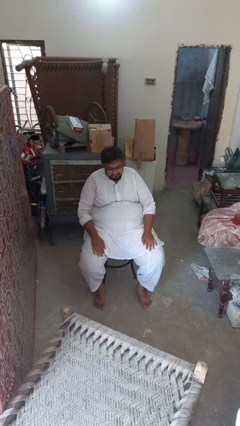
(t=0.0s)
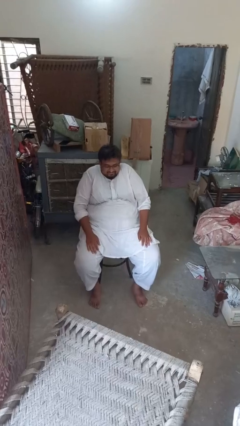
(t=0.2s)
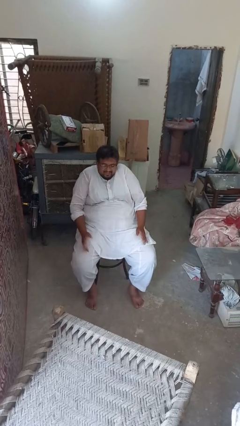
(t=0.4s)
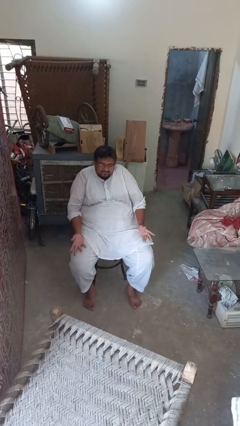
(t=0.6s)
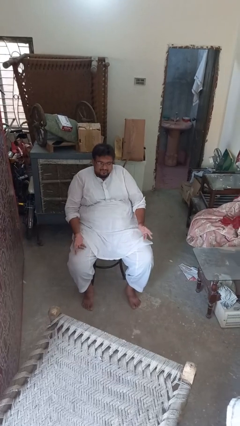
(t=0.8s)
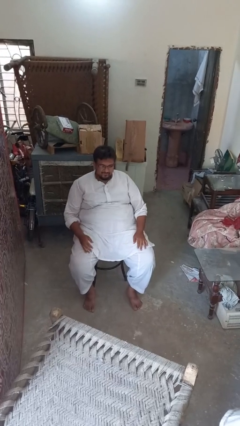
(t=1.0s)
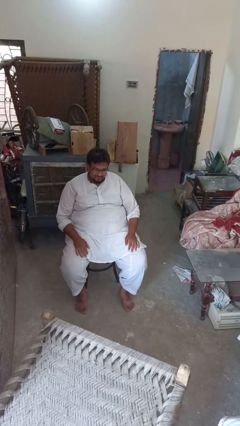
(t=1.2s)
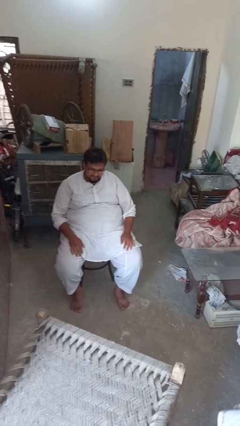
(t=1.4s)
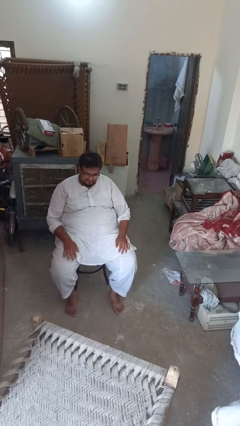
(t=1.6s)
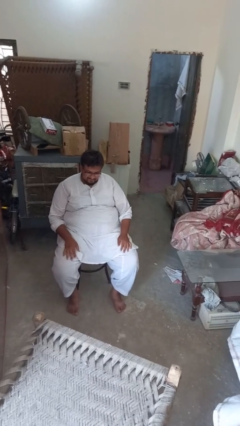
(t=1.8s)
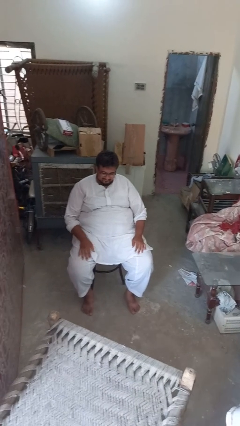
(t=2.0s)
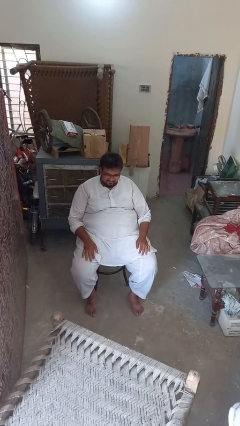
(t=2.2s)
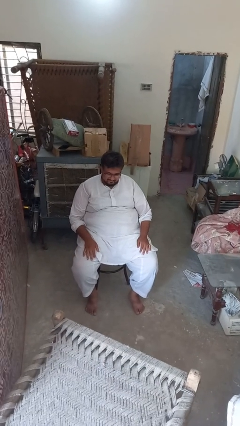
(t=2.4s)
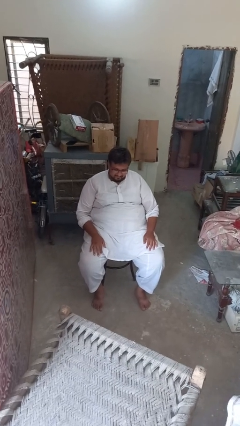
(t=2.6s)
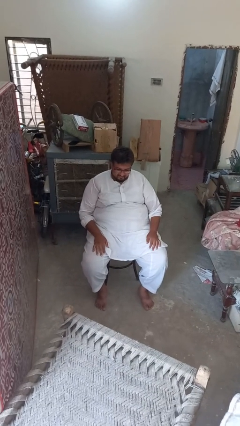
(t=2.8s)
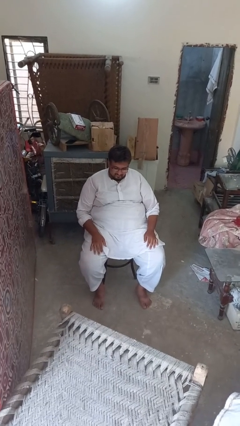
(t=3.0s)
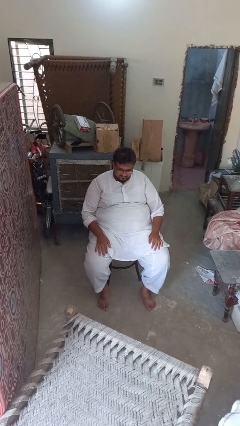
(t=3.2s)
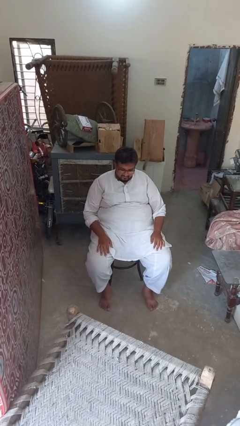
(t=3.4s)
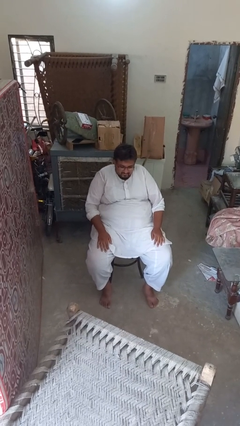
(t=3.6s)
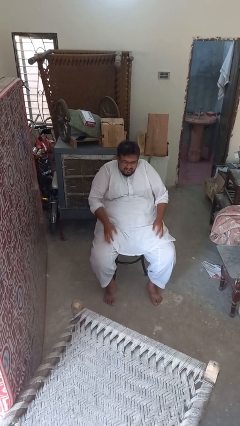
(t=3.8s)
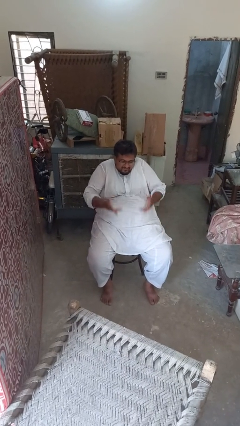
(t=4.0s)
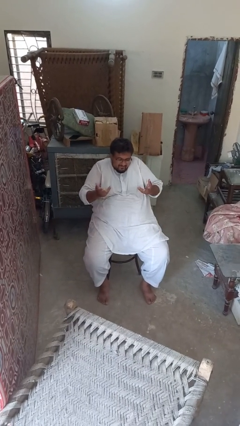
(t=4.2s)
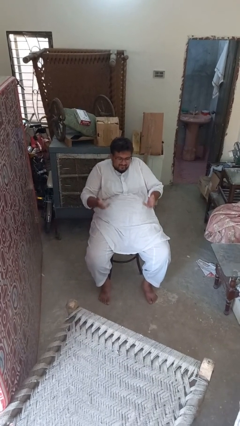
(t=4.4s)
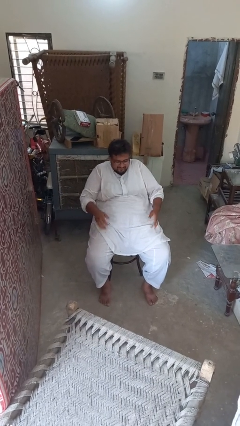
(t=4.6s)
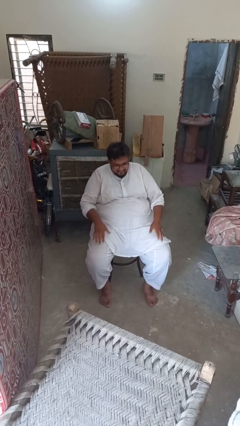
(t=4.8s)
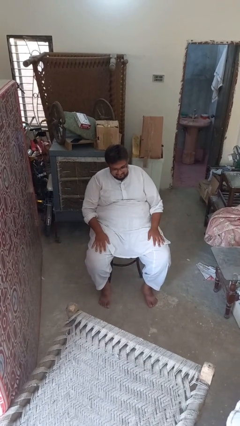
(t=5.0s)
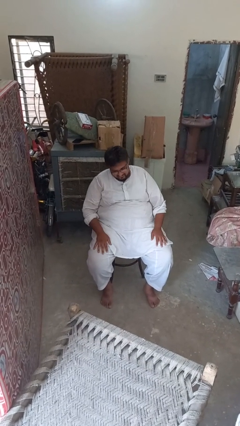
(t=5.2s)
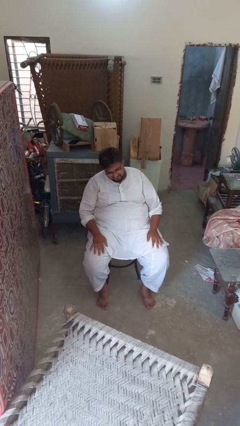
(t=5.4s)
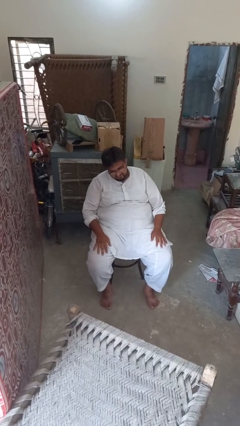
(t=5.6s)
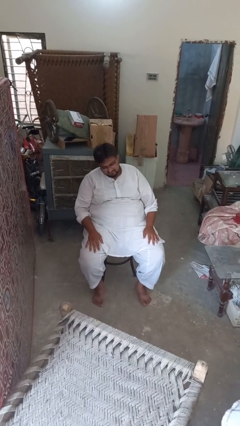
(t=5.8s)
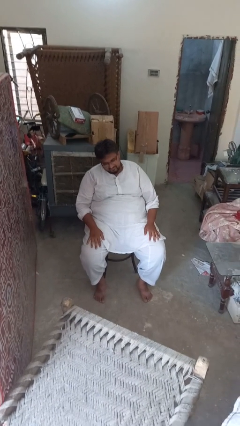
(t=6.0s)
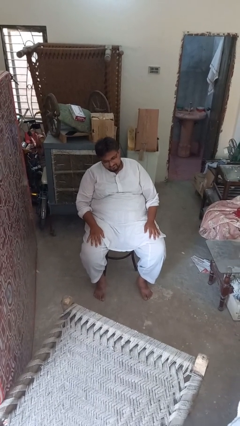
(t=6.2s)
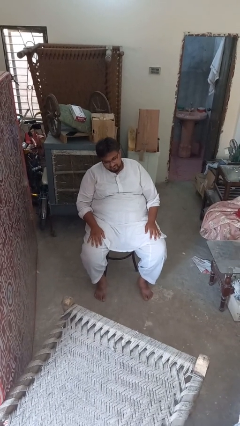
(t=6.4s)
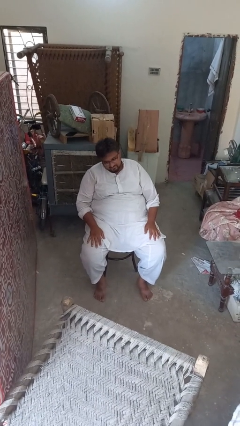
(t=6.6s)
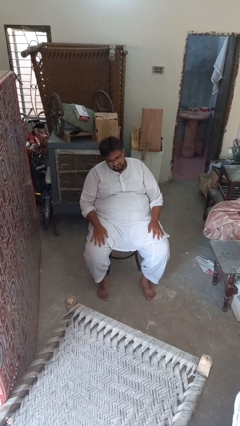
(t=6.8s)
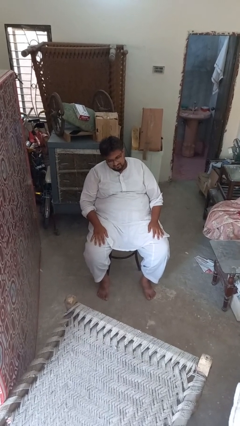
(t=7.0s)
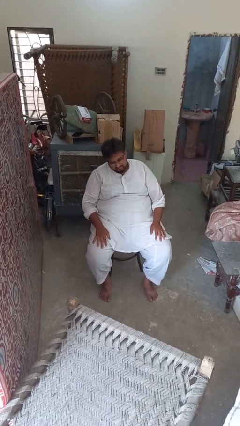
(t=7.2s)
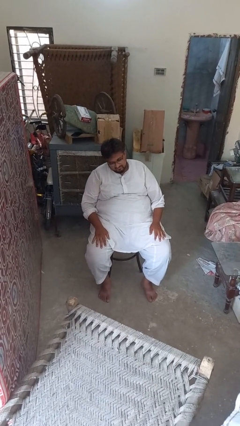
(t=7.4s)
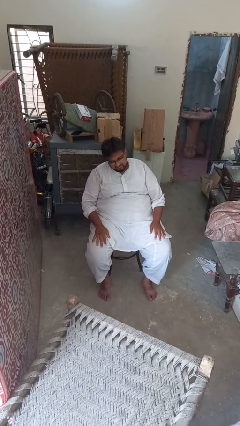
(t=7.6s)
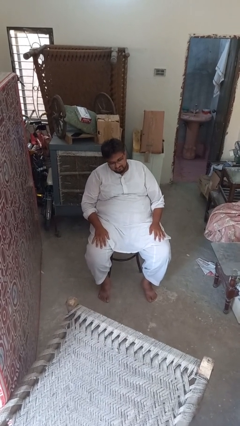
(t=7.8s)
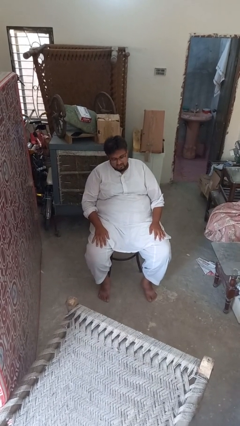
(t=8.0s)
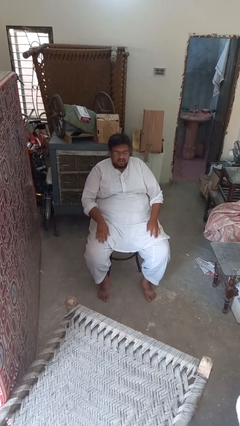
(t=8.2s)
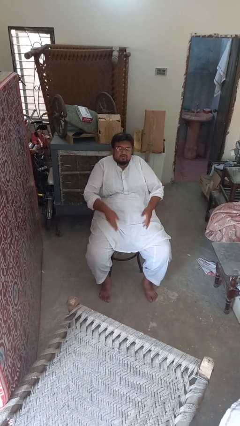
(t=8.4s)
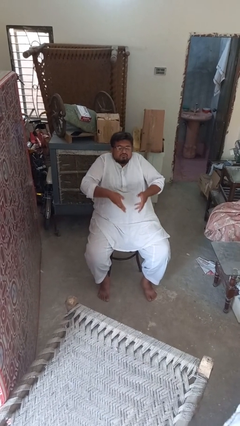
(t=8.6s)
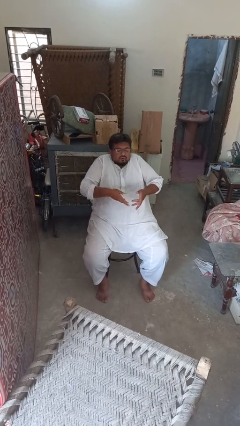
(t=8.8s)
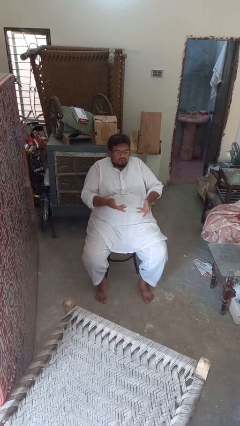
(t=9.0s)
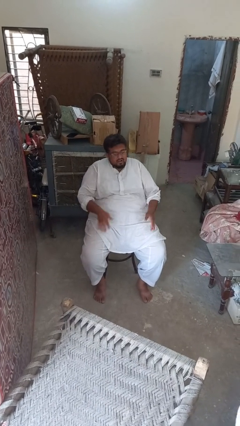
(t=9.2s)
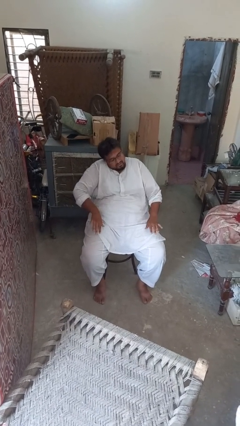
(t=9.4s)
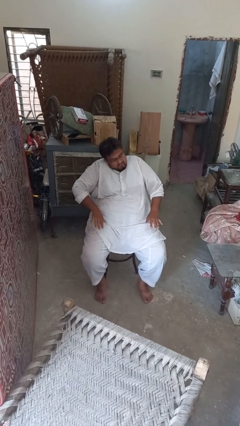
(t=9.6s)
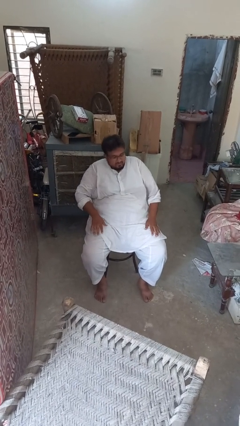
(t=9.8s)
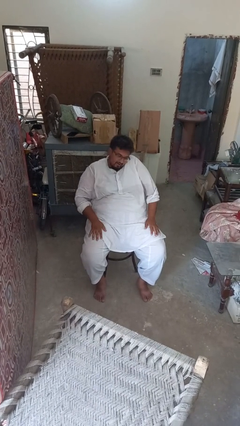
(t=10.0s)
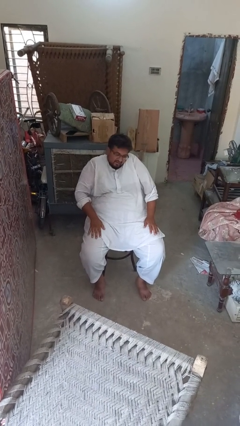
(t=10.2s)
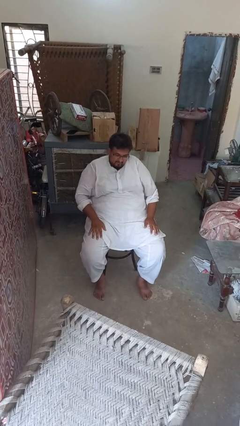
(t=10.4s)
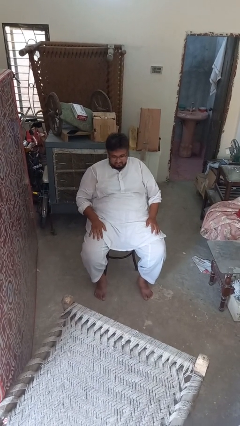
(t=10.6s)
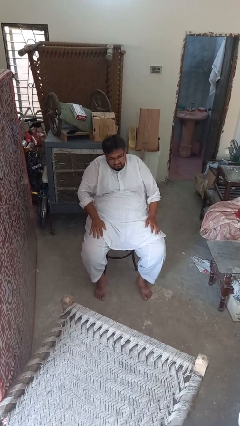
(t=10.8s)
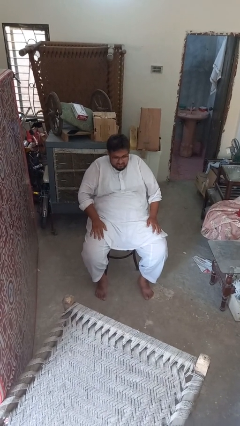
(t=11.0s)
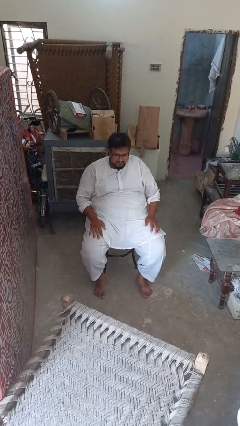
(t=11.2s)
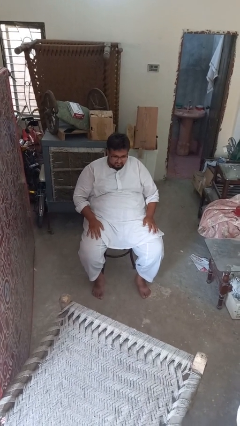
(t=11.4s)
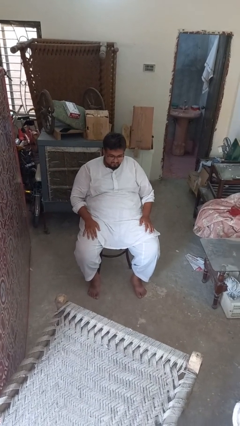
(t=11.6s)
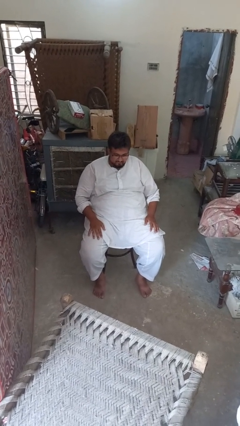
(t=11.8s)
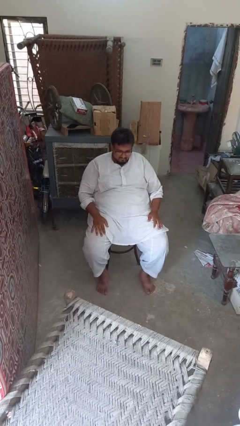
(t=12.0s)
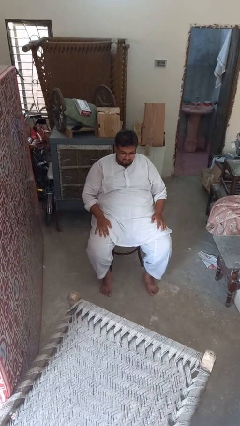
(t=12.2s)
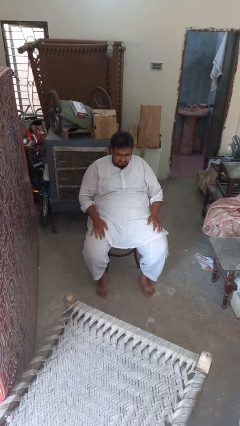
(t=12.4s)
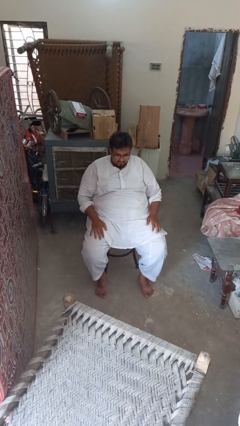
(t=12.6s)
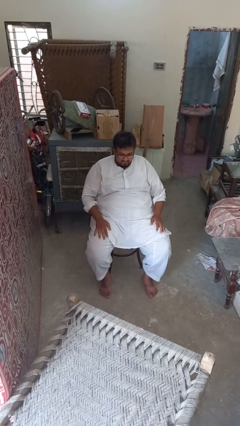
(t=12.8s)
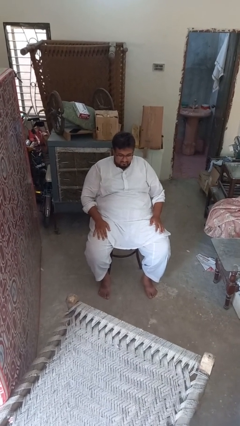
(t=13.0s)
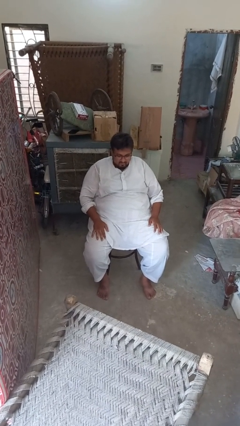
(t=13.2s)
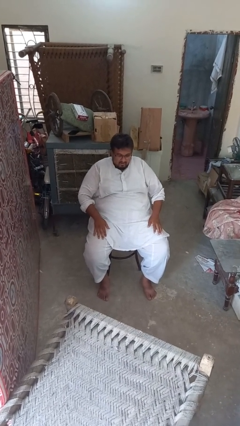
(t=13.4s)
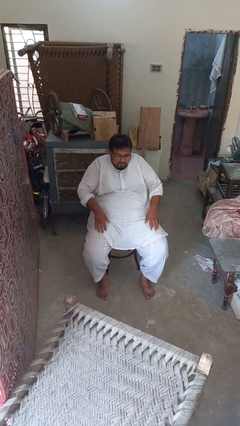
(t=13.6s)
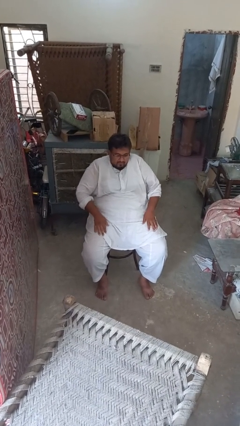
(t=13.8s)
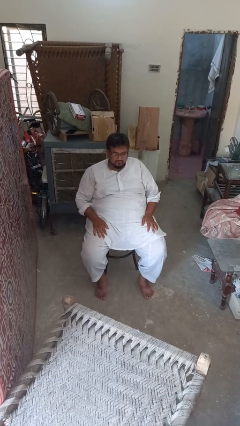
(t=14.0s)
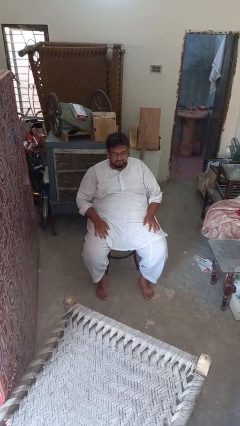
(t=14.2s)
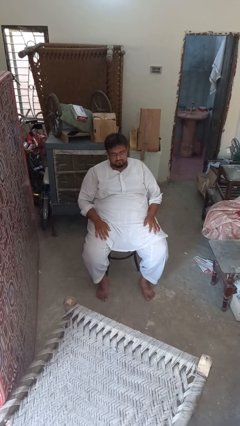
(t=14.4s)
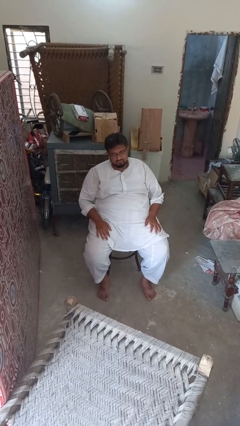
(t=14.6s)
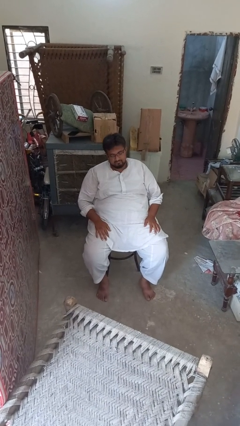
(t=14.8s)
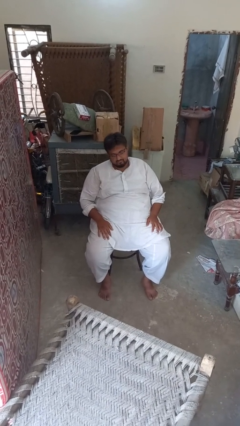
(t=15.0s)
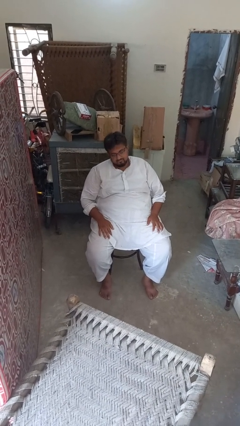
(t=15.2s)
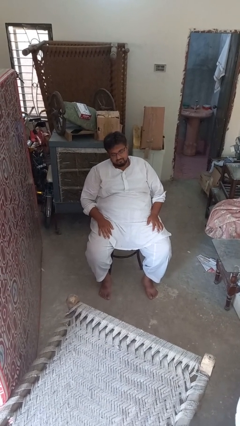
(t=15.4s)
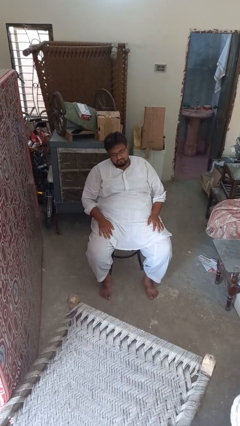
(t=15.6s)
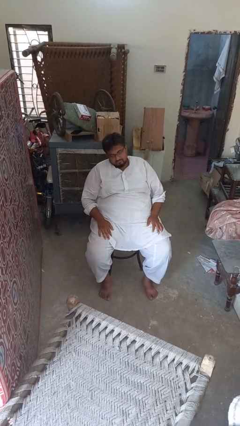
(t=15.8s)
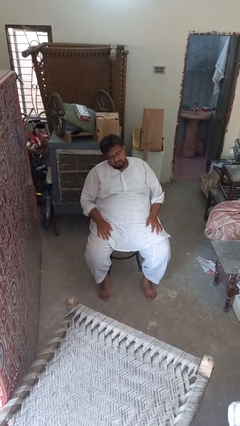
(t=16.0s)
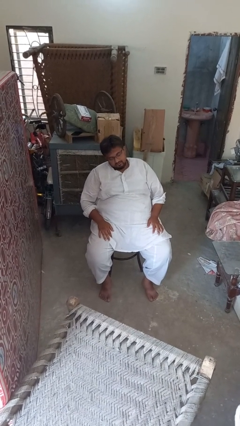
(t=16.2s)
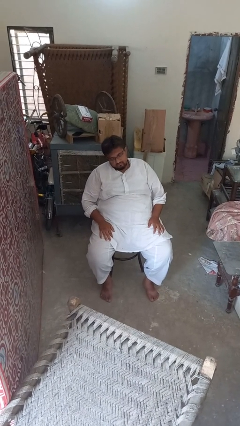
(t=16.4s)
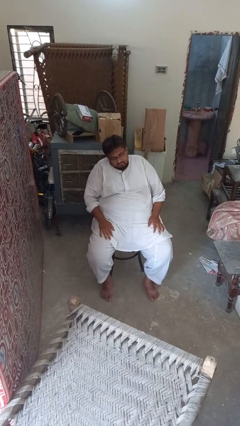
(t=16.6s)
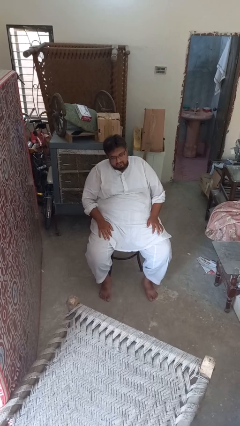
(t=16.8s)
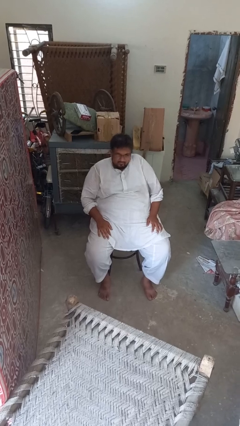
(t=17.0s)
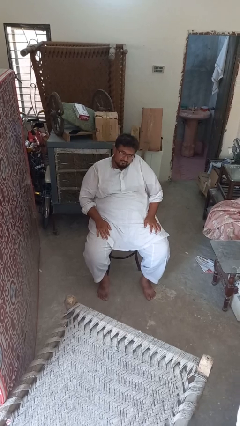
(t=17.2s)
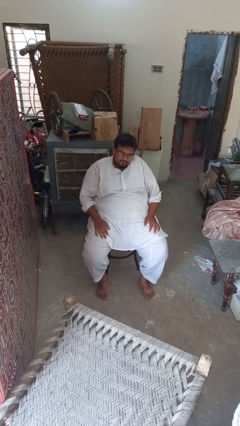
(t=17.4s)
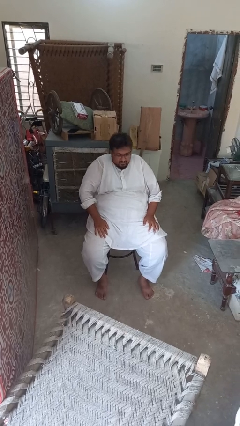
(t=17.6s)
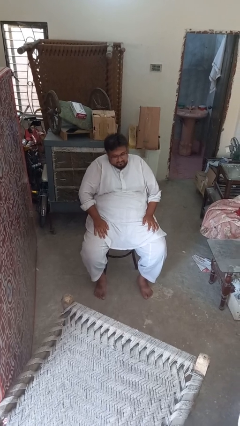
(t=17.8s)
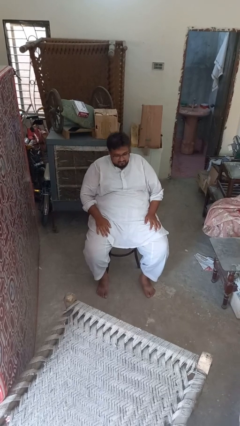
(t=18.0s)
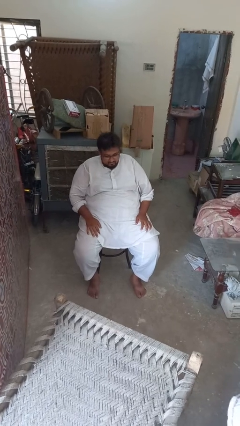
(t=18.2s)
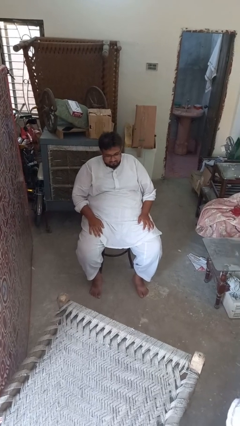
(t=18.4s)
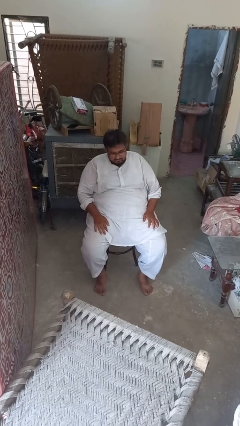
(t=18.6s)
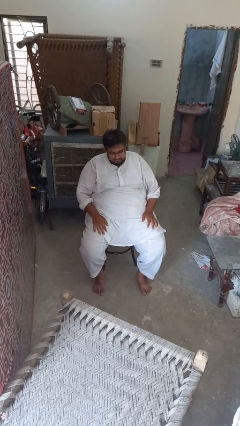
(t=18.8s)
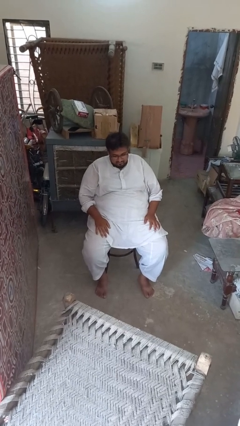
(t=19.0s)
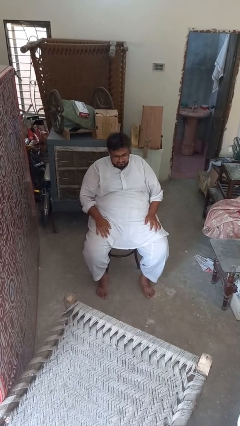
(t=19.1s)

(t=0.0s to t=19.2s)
person shrugs
